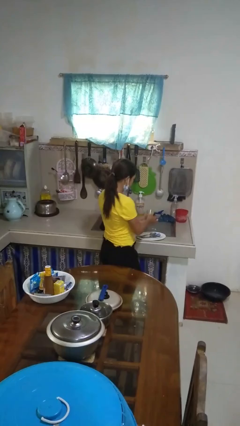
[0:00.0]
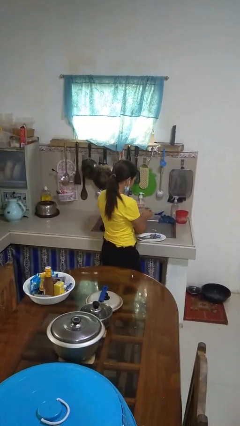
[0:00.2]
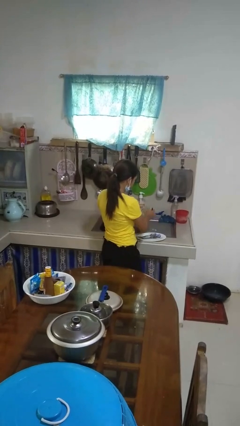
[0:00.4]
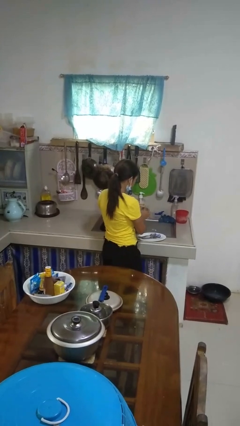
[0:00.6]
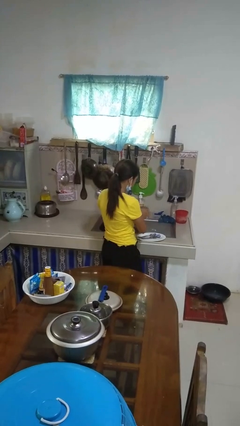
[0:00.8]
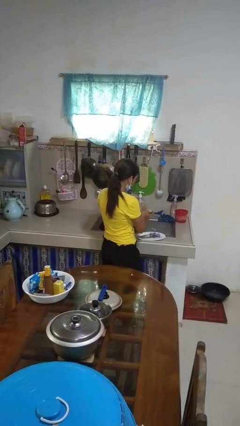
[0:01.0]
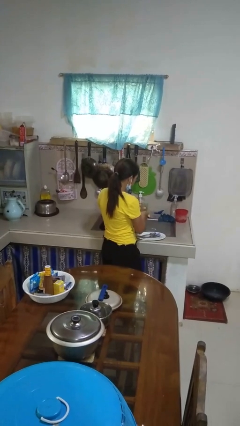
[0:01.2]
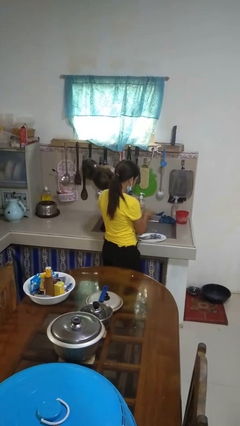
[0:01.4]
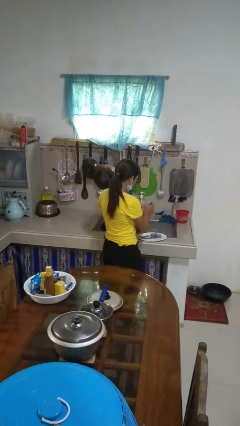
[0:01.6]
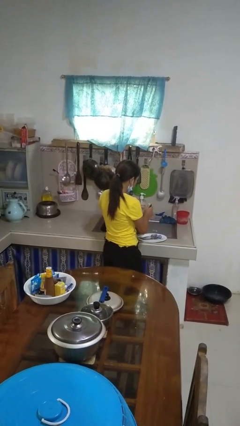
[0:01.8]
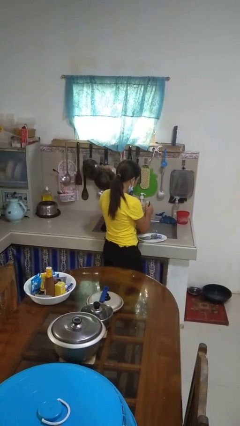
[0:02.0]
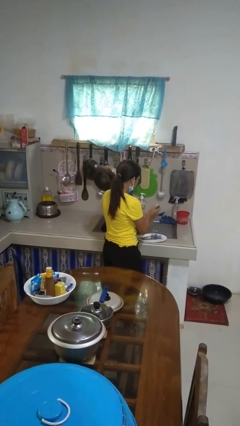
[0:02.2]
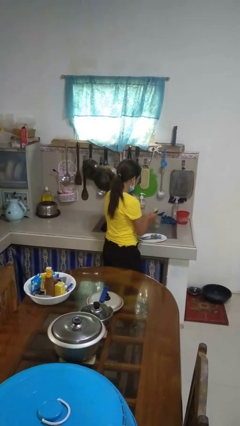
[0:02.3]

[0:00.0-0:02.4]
person washes dish

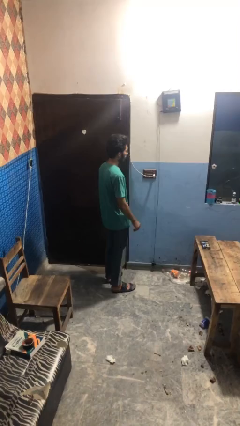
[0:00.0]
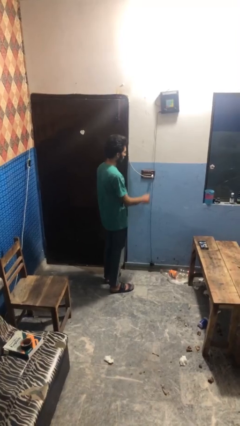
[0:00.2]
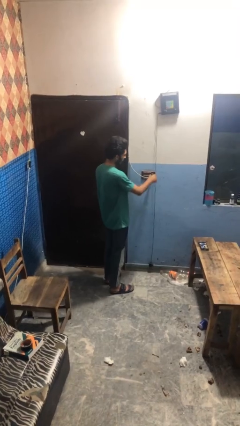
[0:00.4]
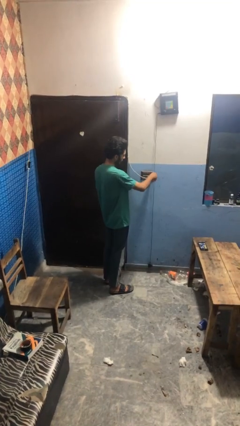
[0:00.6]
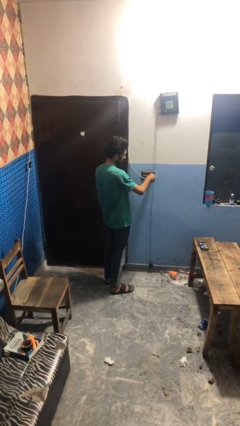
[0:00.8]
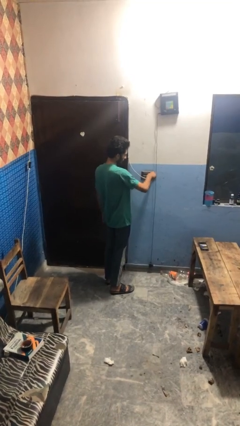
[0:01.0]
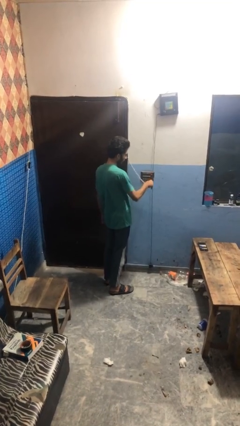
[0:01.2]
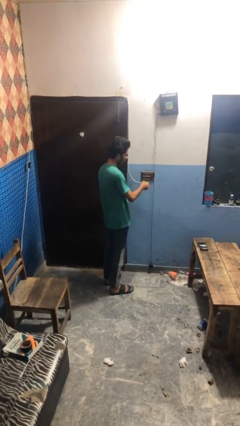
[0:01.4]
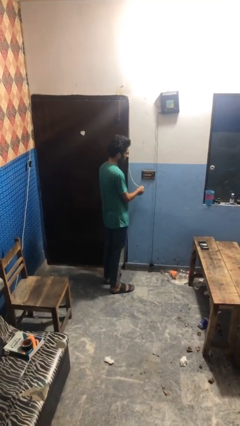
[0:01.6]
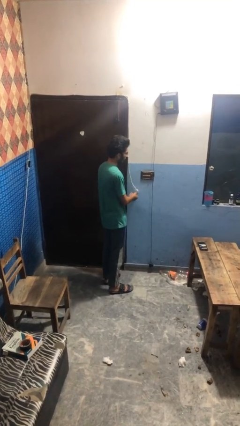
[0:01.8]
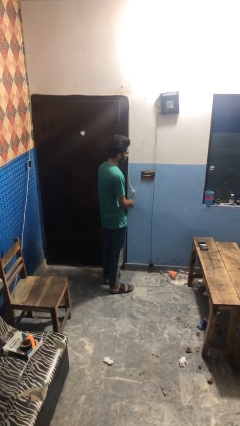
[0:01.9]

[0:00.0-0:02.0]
person unplugs from electrical socket

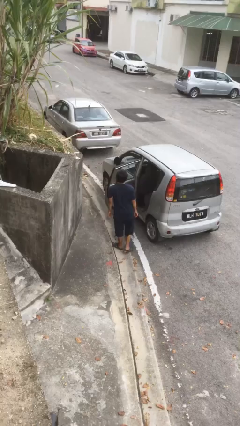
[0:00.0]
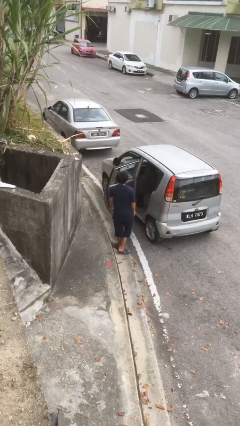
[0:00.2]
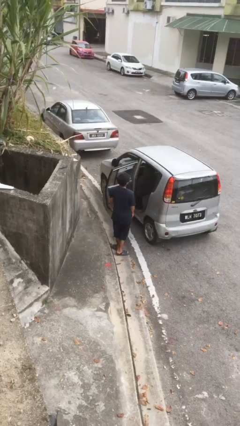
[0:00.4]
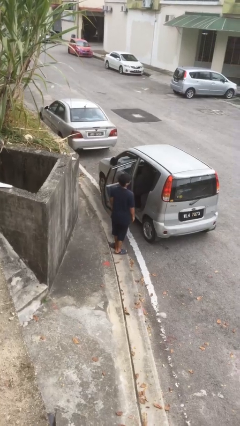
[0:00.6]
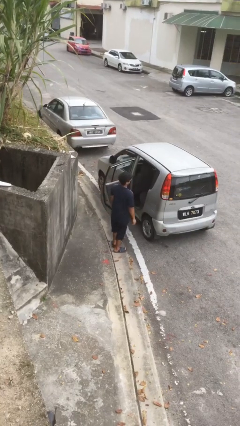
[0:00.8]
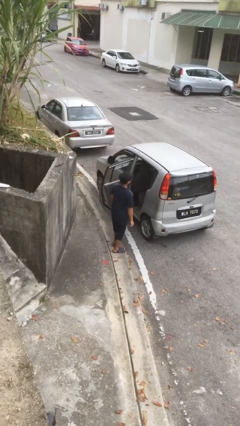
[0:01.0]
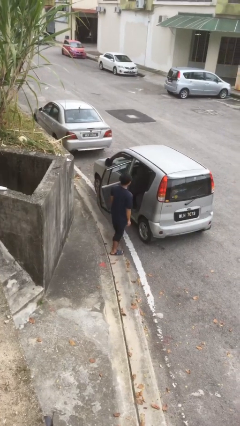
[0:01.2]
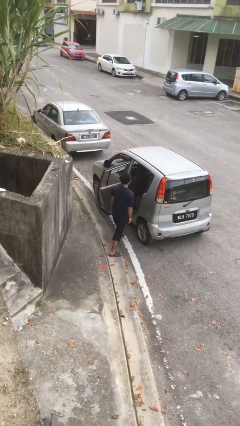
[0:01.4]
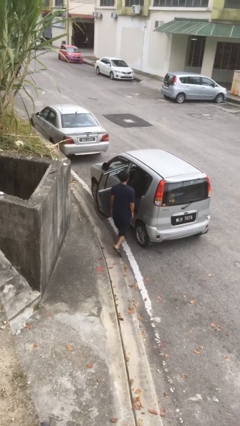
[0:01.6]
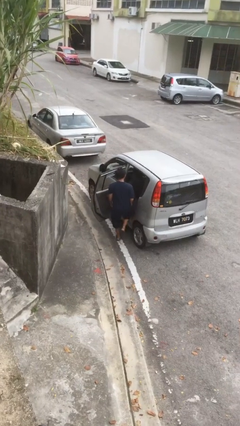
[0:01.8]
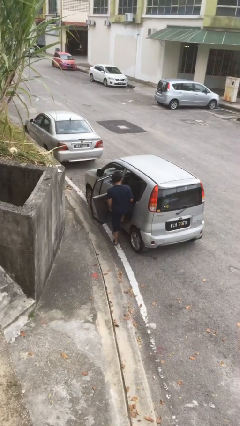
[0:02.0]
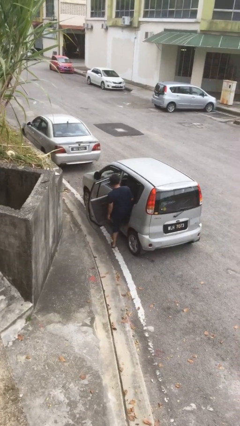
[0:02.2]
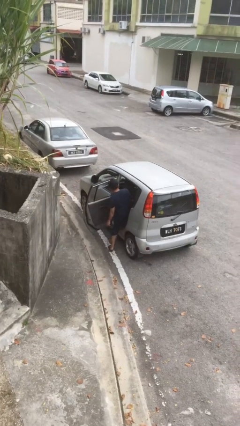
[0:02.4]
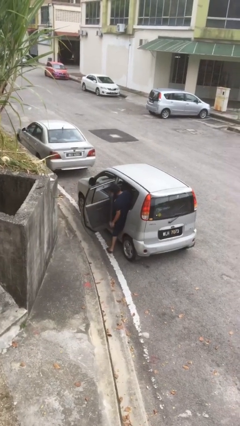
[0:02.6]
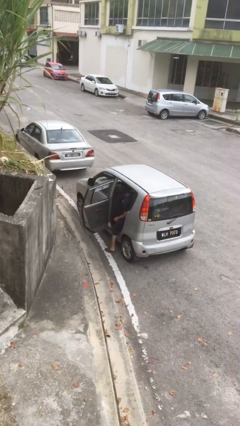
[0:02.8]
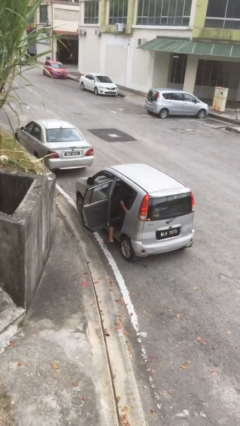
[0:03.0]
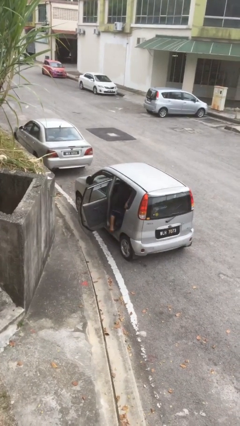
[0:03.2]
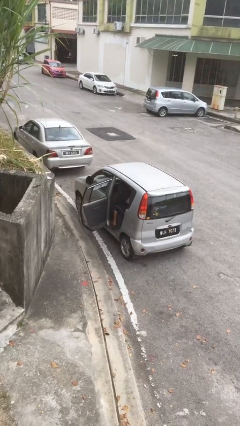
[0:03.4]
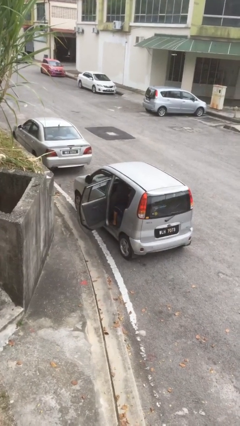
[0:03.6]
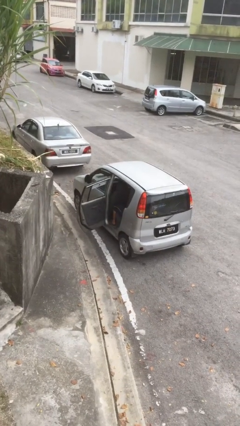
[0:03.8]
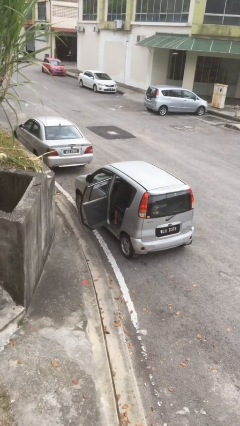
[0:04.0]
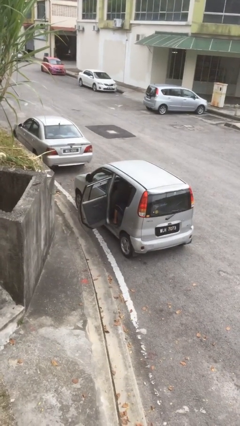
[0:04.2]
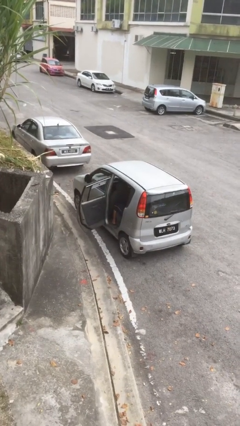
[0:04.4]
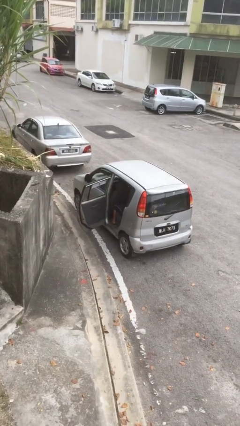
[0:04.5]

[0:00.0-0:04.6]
person enters car

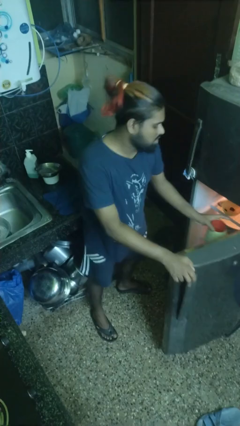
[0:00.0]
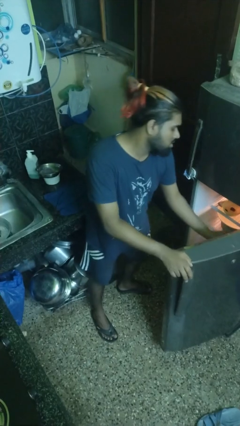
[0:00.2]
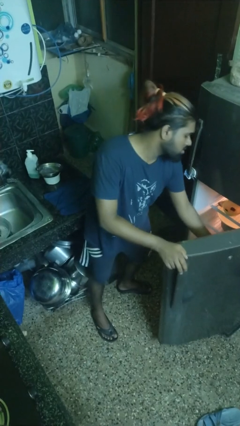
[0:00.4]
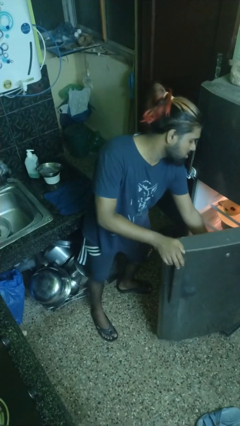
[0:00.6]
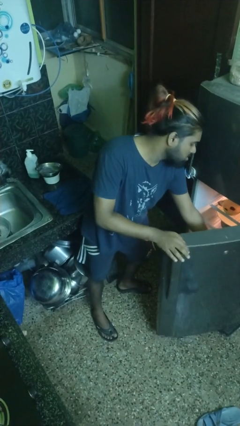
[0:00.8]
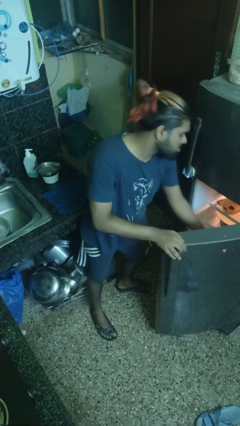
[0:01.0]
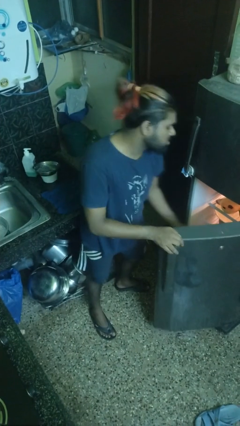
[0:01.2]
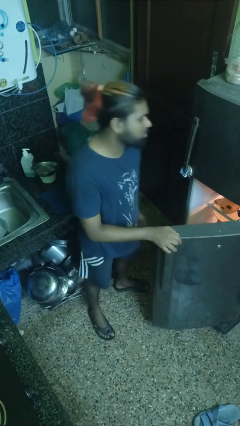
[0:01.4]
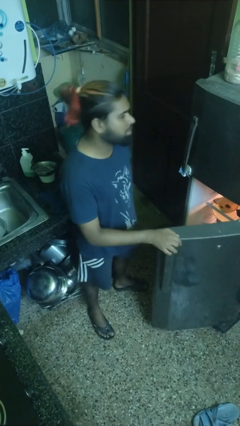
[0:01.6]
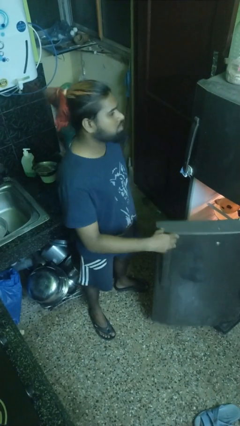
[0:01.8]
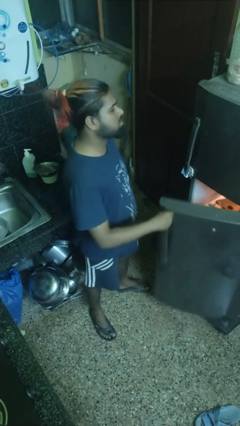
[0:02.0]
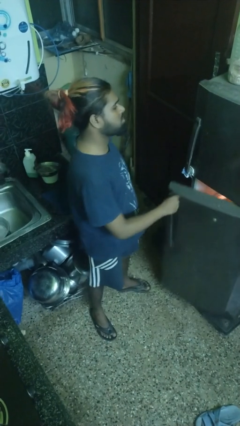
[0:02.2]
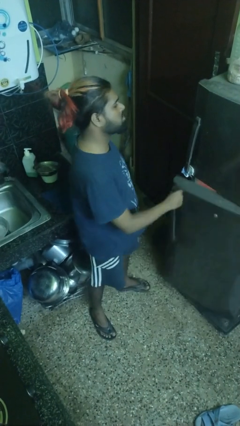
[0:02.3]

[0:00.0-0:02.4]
person puts object into refrigerator

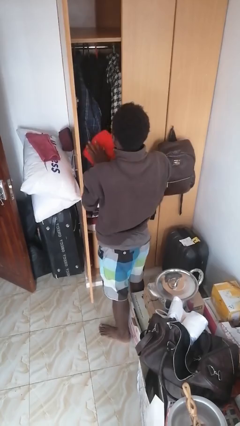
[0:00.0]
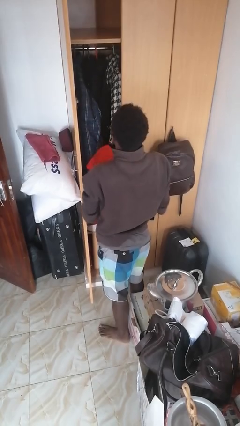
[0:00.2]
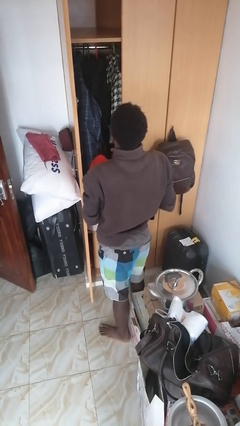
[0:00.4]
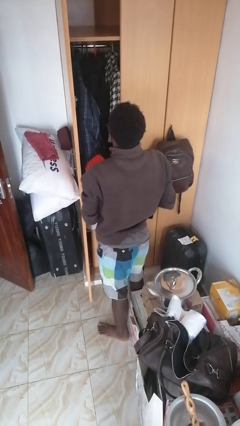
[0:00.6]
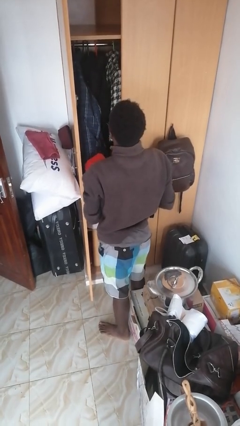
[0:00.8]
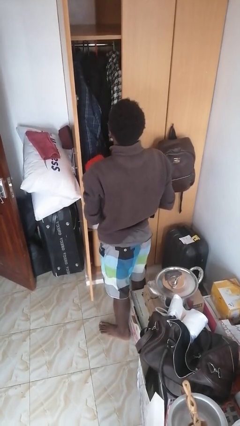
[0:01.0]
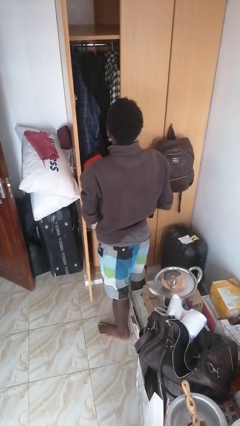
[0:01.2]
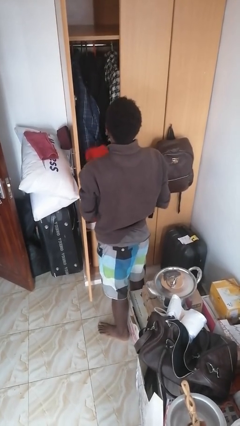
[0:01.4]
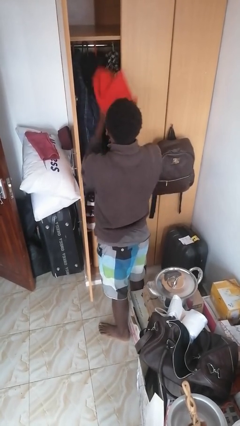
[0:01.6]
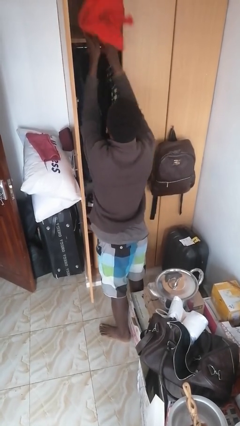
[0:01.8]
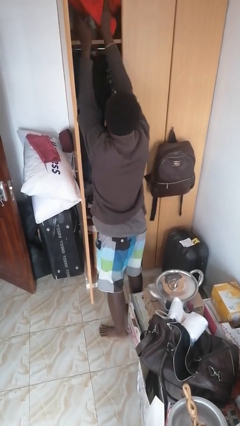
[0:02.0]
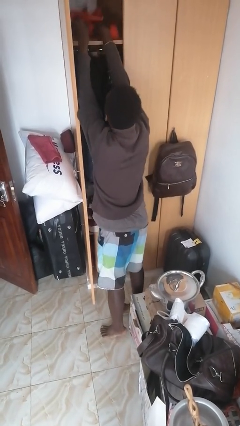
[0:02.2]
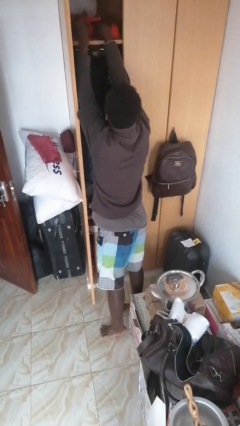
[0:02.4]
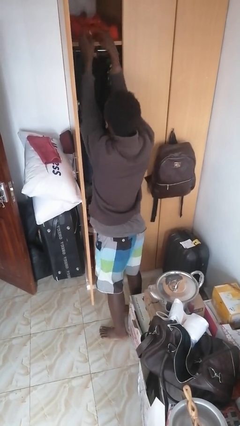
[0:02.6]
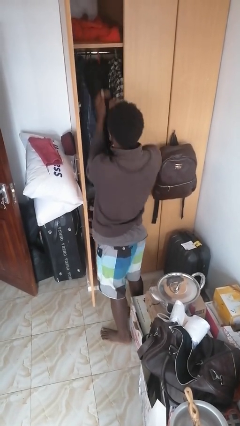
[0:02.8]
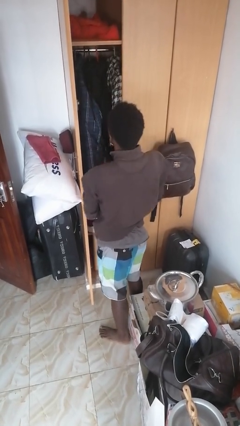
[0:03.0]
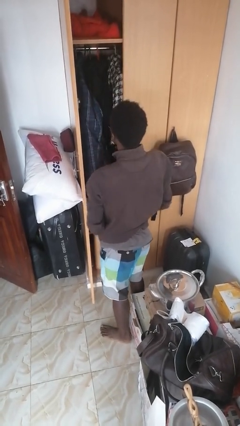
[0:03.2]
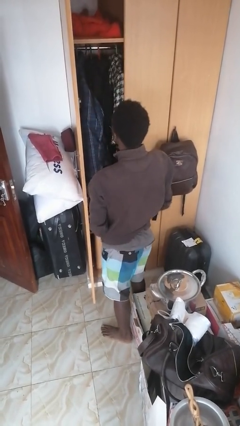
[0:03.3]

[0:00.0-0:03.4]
person puts down object on shelf

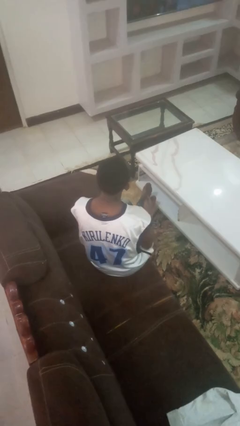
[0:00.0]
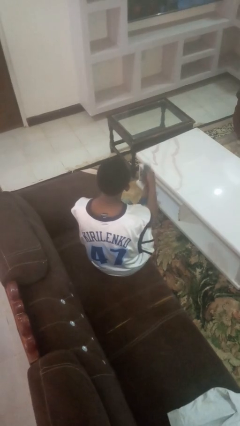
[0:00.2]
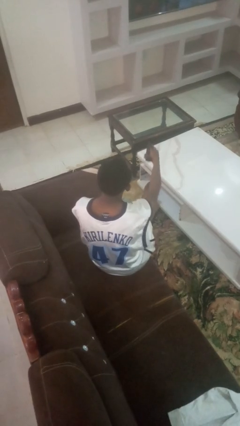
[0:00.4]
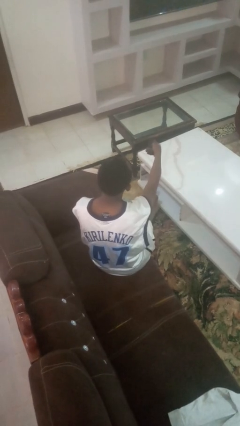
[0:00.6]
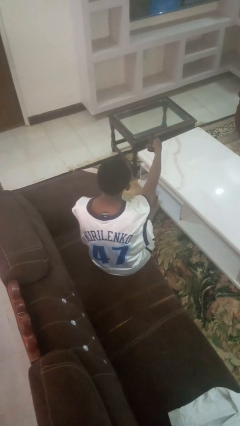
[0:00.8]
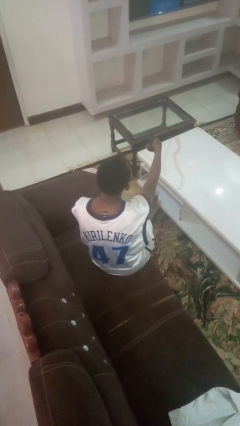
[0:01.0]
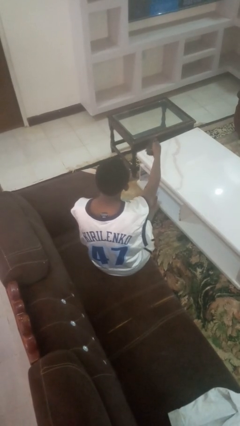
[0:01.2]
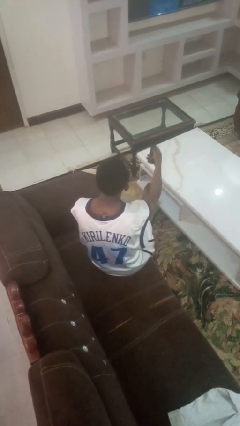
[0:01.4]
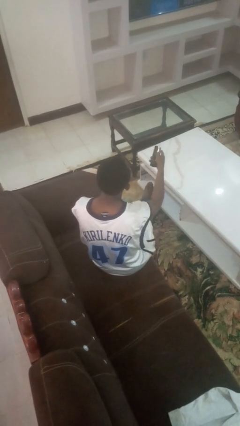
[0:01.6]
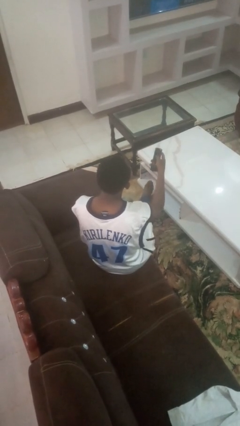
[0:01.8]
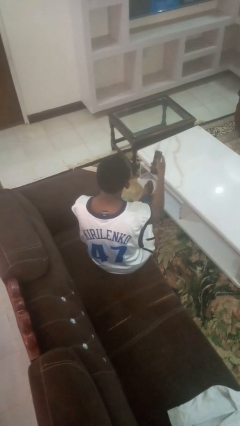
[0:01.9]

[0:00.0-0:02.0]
person uses television remote
